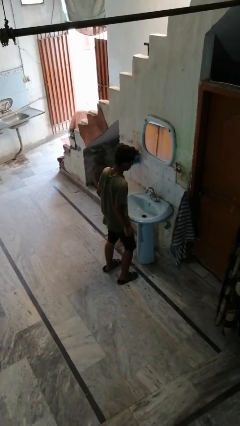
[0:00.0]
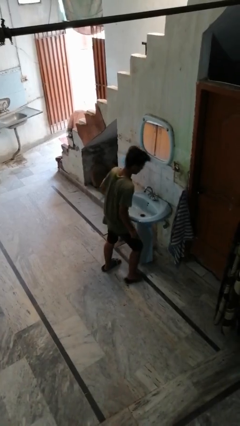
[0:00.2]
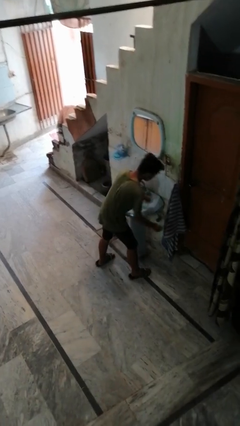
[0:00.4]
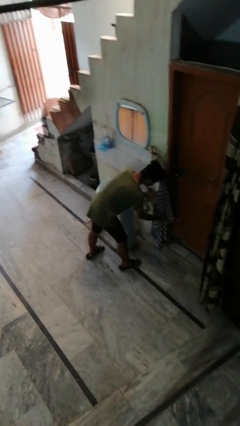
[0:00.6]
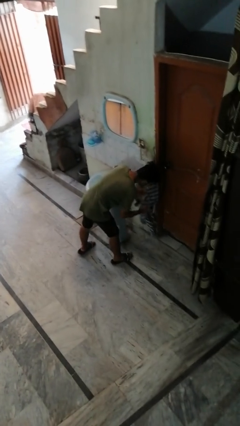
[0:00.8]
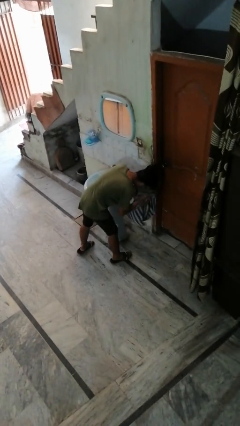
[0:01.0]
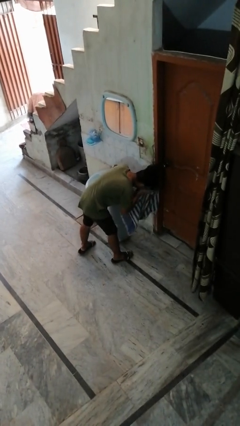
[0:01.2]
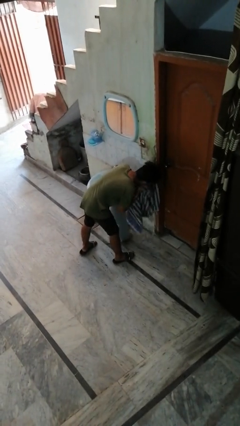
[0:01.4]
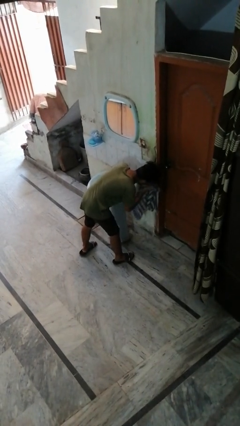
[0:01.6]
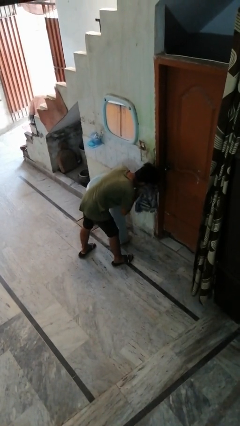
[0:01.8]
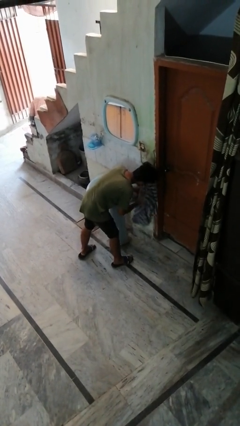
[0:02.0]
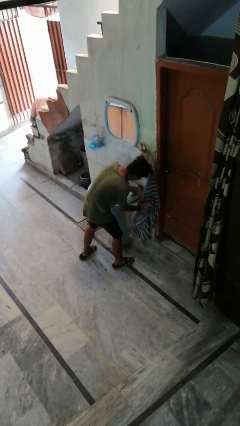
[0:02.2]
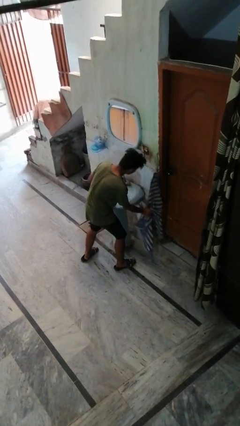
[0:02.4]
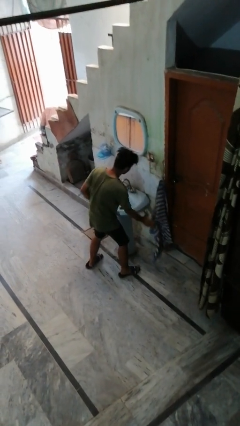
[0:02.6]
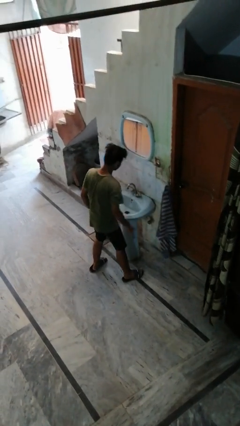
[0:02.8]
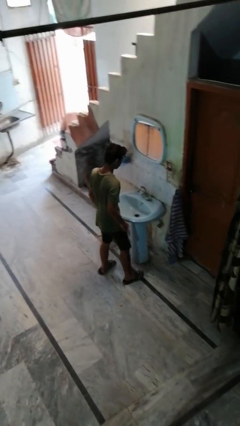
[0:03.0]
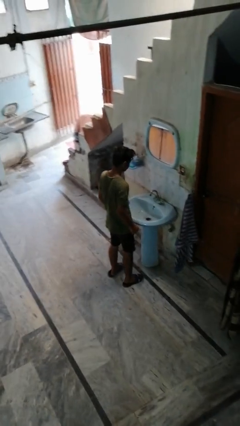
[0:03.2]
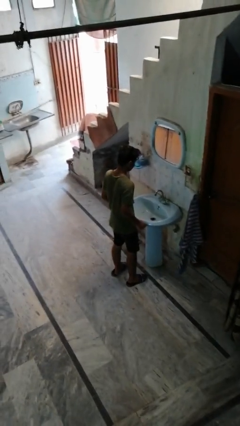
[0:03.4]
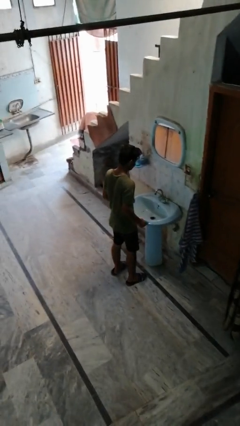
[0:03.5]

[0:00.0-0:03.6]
person dries face with towel

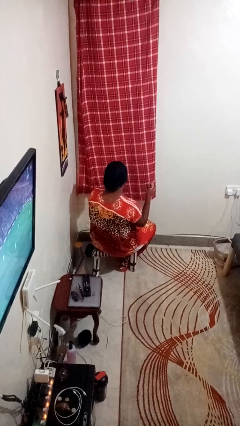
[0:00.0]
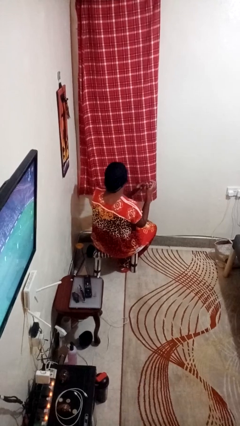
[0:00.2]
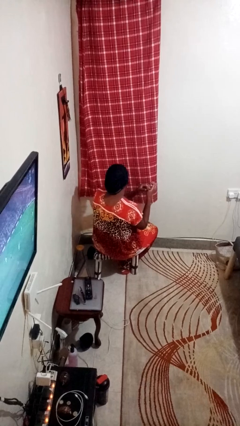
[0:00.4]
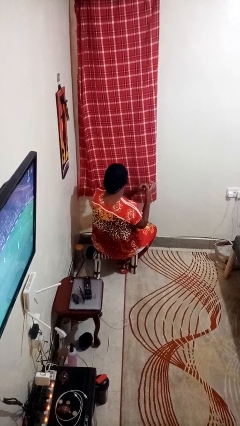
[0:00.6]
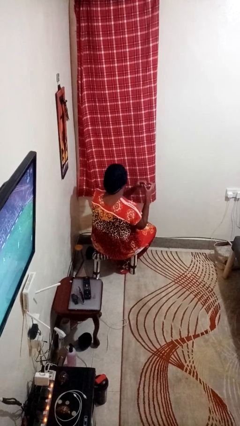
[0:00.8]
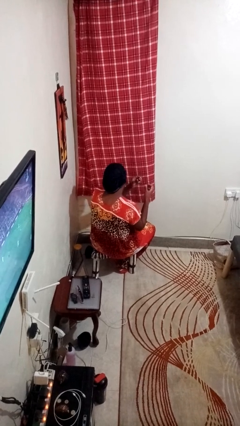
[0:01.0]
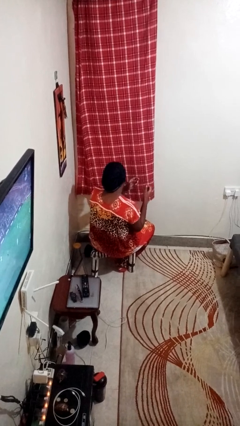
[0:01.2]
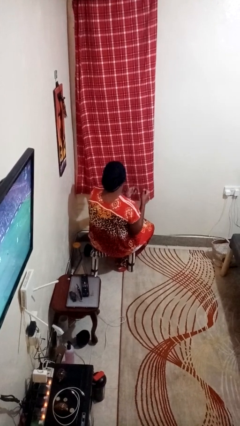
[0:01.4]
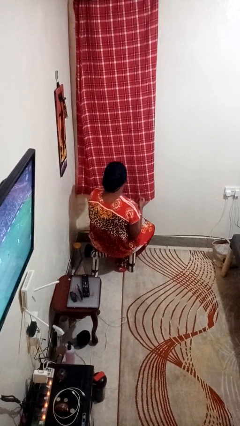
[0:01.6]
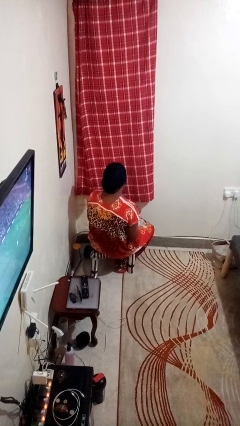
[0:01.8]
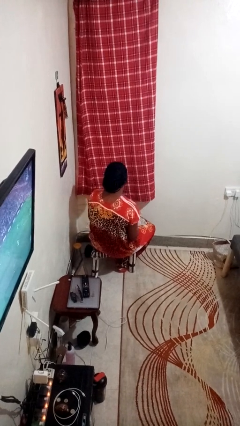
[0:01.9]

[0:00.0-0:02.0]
person takes off ring

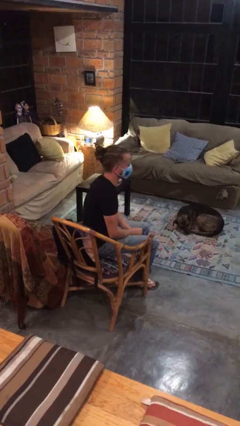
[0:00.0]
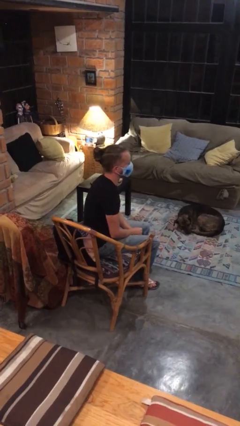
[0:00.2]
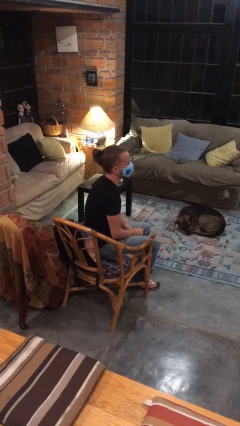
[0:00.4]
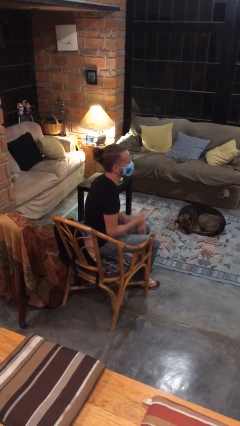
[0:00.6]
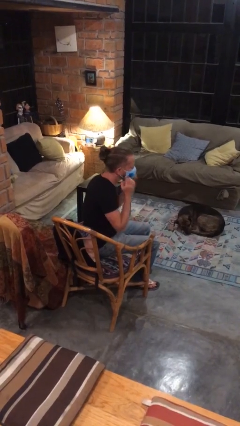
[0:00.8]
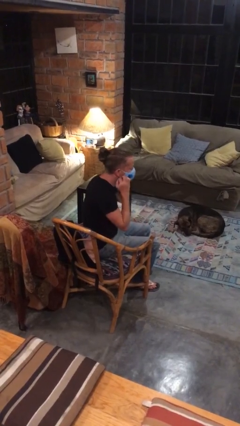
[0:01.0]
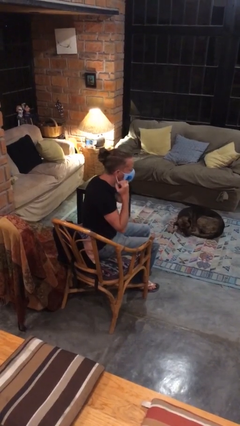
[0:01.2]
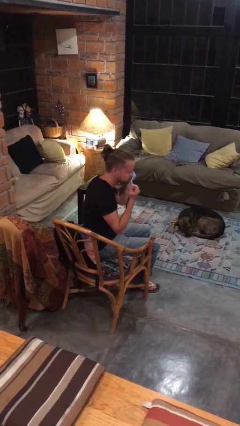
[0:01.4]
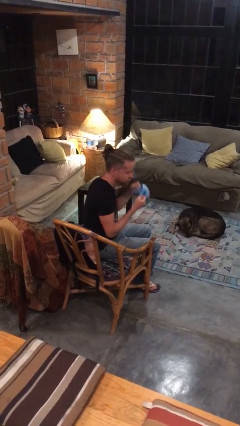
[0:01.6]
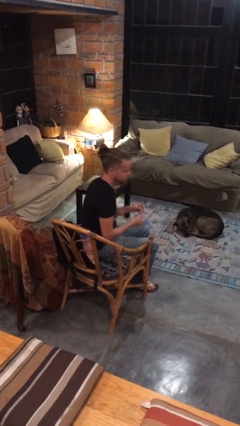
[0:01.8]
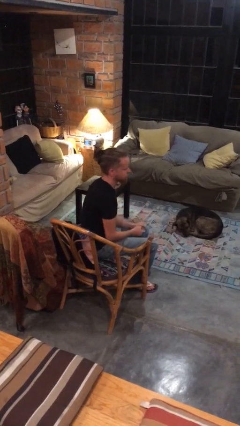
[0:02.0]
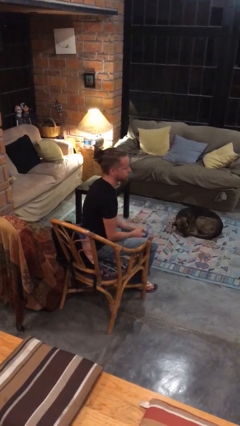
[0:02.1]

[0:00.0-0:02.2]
person takes off facemask

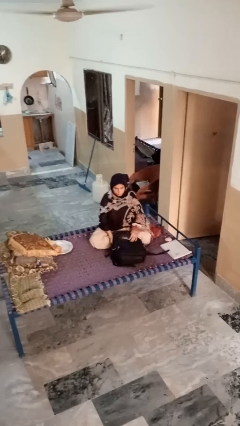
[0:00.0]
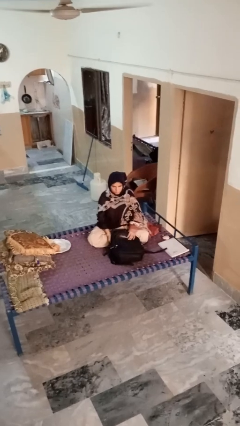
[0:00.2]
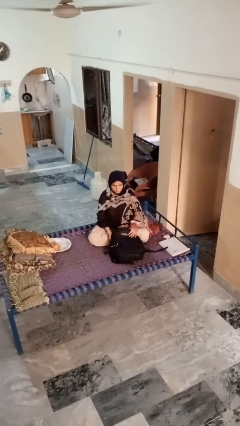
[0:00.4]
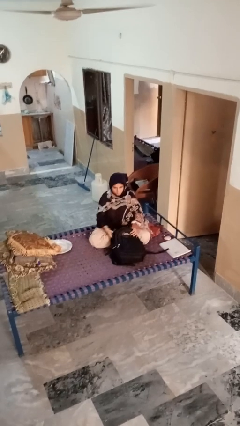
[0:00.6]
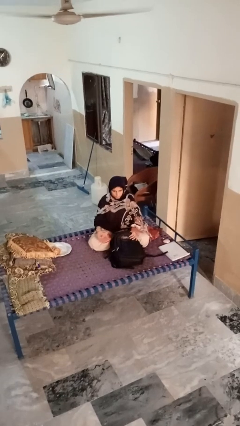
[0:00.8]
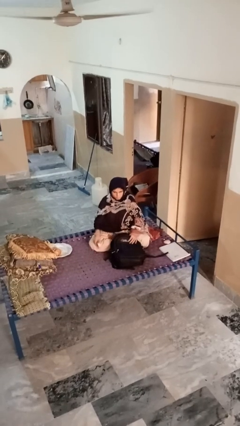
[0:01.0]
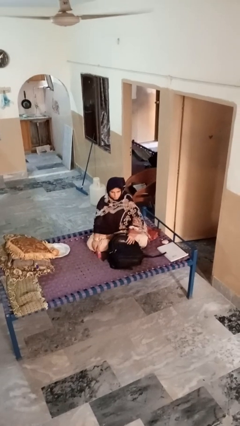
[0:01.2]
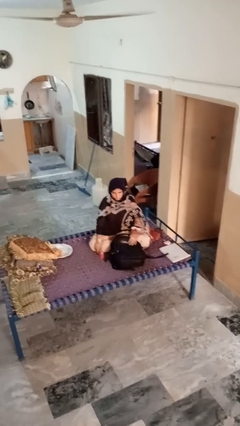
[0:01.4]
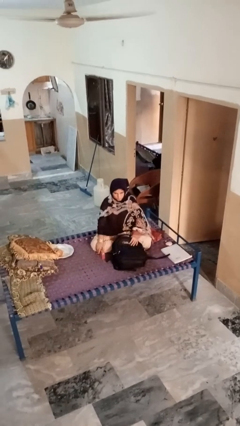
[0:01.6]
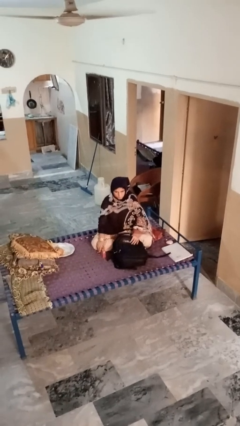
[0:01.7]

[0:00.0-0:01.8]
person takes object from bag

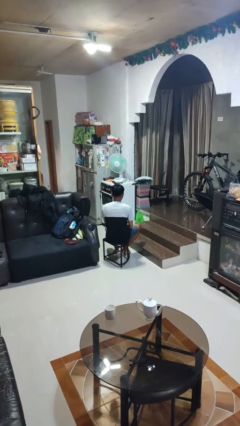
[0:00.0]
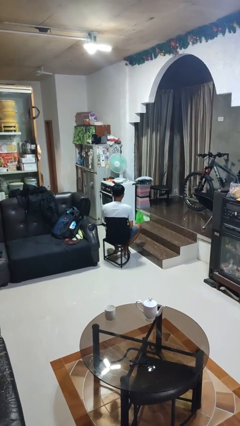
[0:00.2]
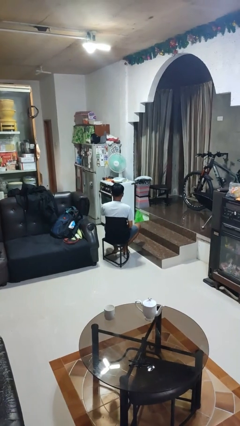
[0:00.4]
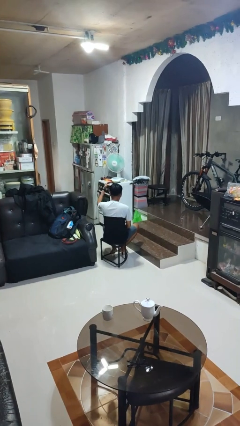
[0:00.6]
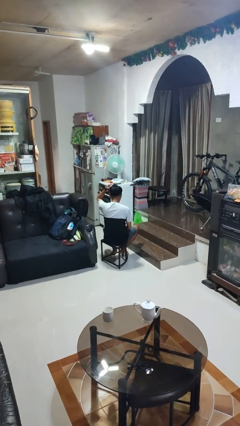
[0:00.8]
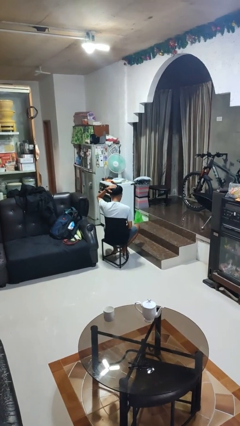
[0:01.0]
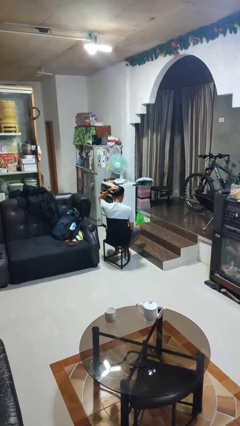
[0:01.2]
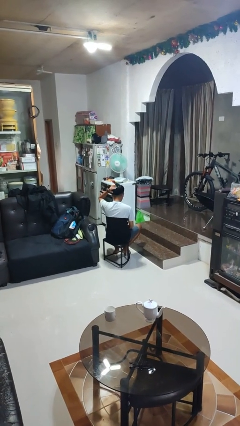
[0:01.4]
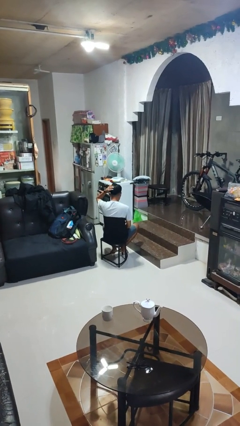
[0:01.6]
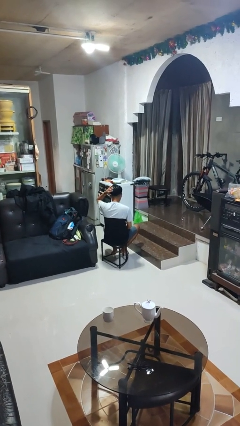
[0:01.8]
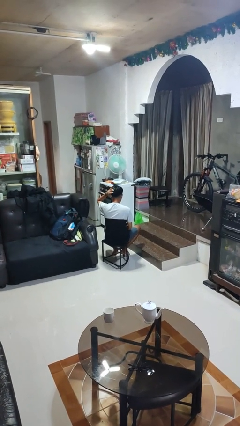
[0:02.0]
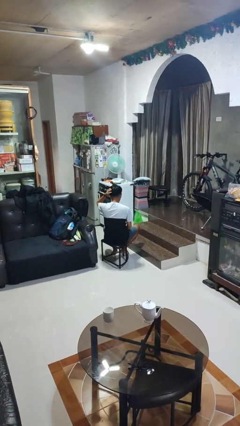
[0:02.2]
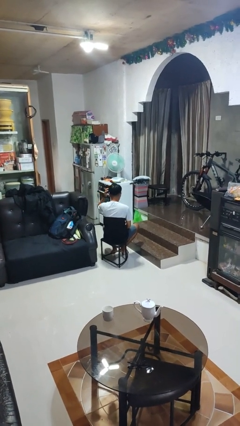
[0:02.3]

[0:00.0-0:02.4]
person pats head

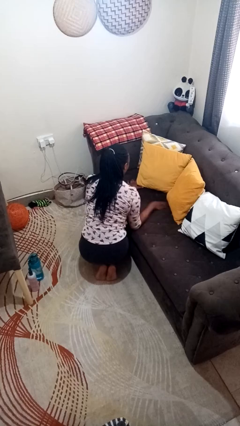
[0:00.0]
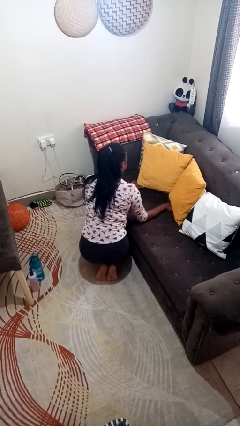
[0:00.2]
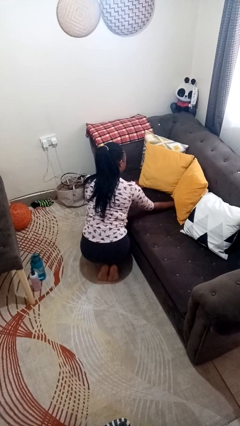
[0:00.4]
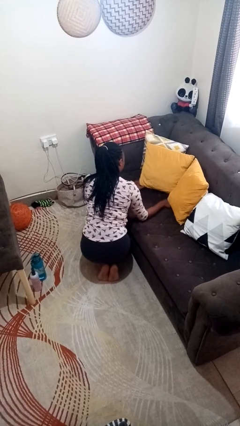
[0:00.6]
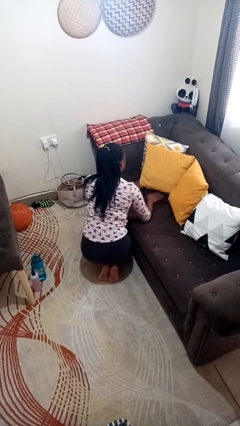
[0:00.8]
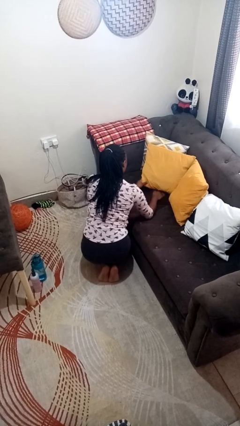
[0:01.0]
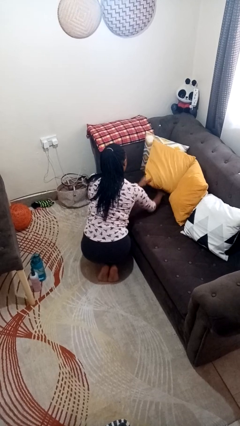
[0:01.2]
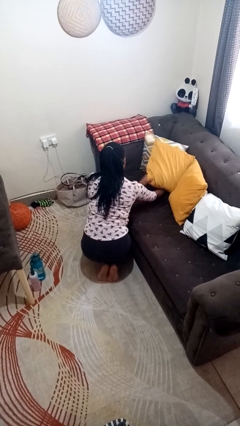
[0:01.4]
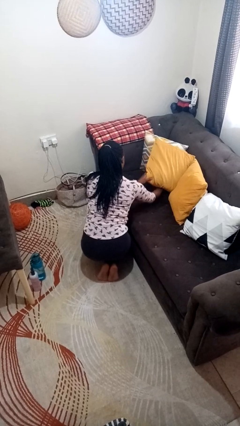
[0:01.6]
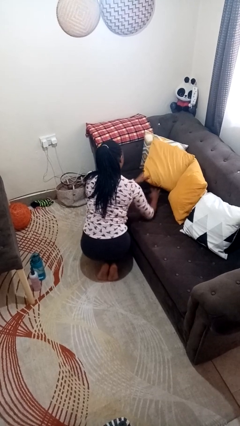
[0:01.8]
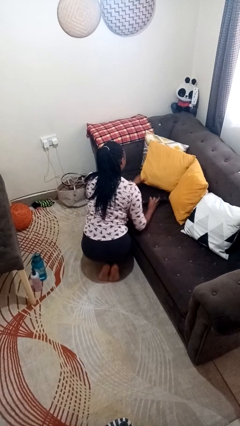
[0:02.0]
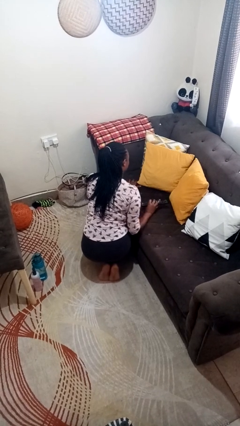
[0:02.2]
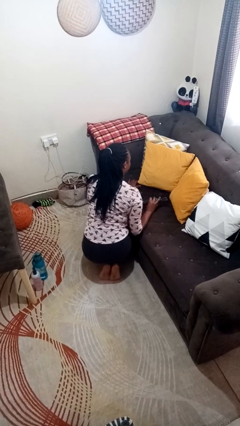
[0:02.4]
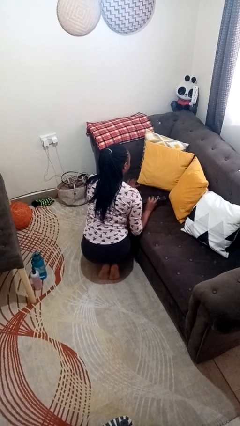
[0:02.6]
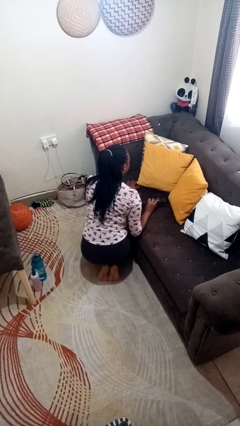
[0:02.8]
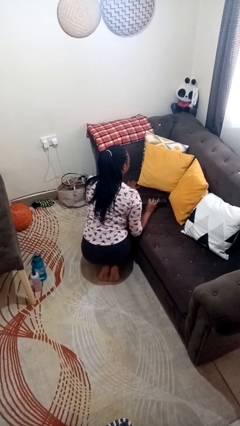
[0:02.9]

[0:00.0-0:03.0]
person searches in couch

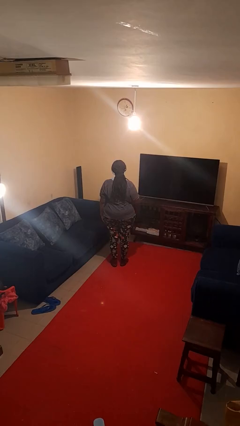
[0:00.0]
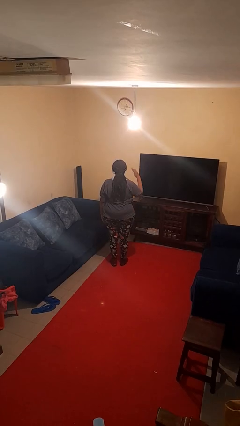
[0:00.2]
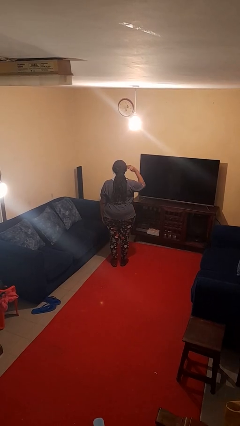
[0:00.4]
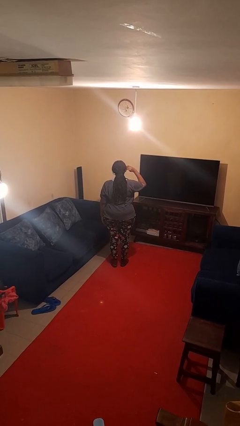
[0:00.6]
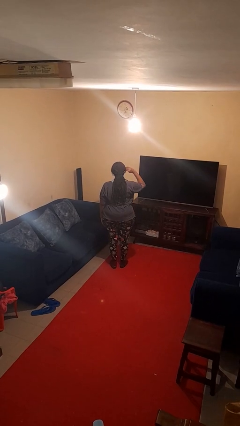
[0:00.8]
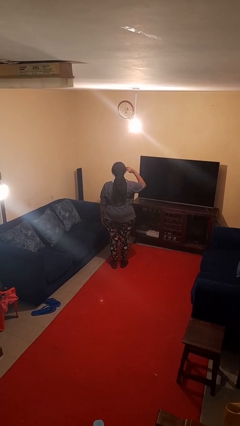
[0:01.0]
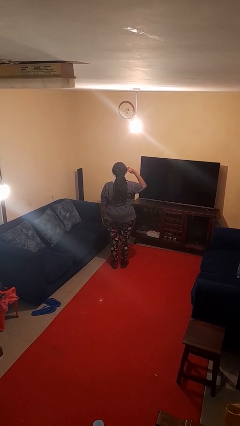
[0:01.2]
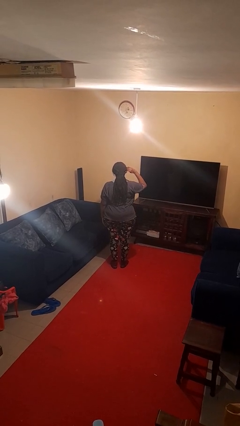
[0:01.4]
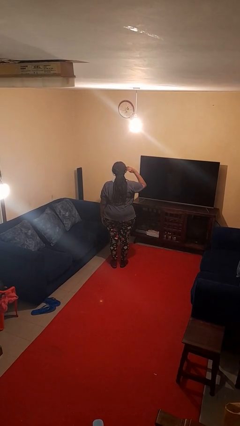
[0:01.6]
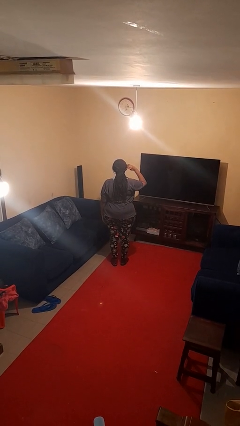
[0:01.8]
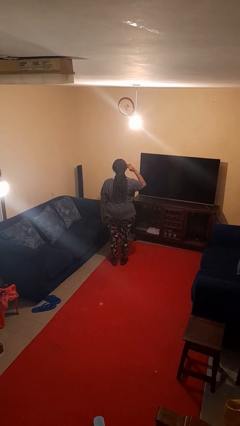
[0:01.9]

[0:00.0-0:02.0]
person salutes

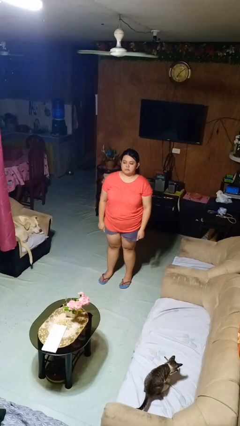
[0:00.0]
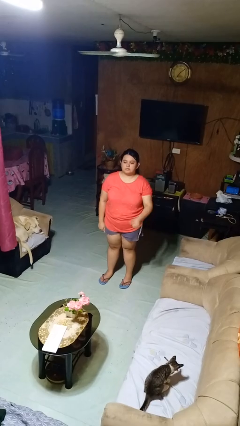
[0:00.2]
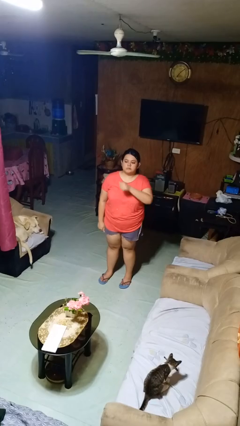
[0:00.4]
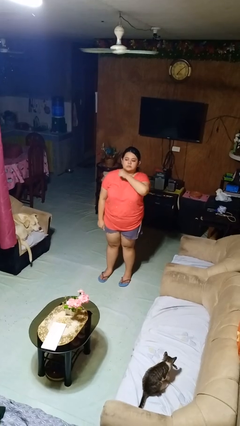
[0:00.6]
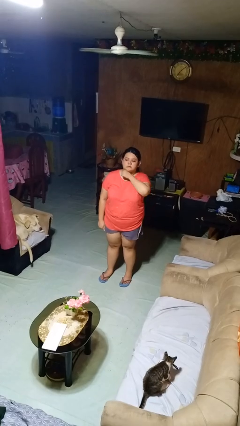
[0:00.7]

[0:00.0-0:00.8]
person gestures cut
